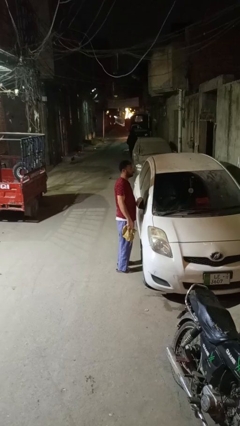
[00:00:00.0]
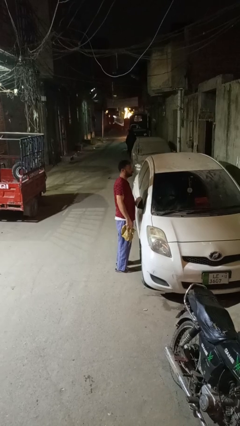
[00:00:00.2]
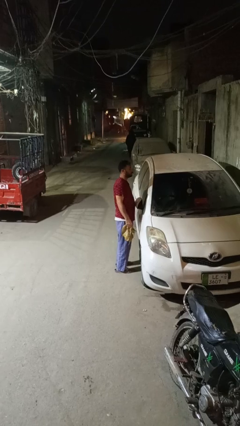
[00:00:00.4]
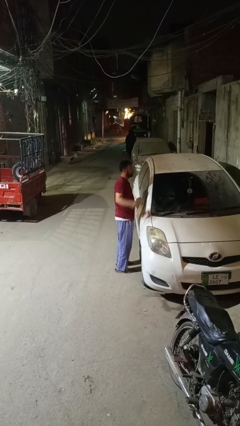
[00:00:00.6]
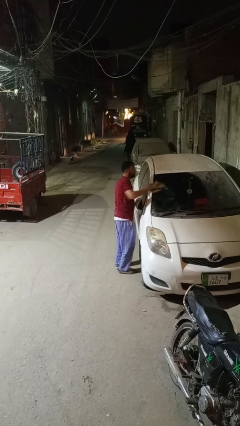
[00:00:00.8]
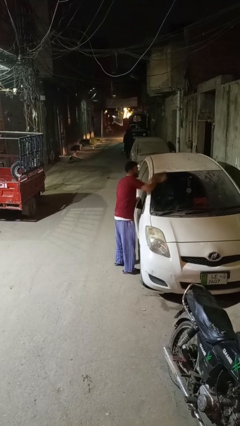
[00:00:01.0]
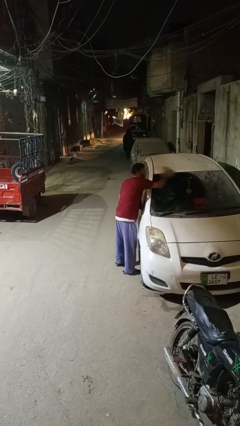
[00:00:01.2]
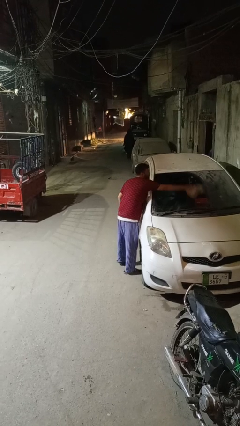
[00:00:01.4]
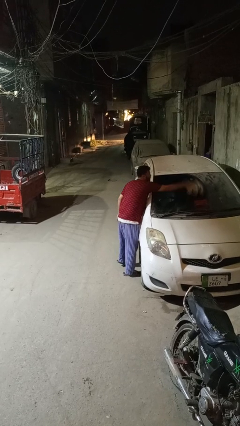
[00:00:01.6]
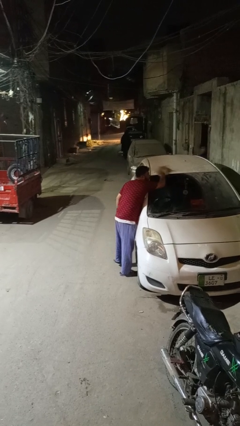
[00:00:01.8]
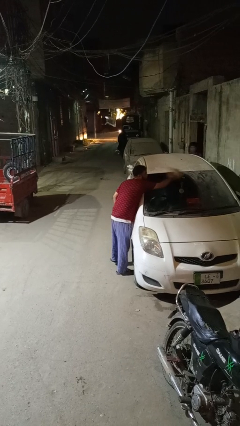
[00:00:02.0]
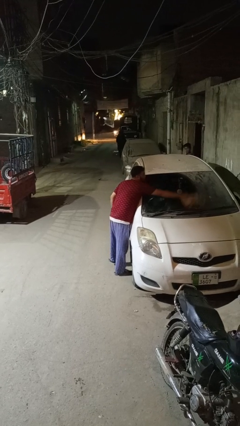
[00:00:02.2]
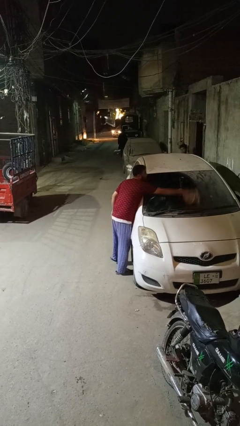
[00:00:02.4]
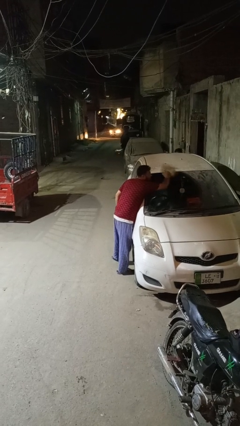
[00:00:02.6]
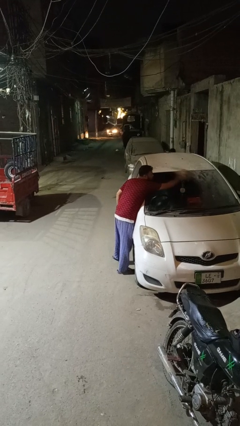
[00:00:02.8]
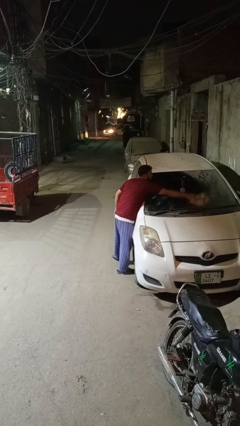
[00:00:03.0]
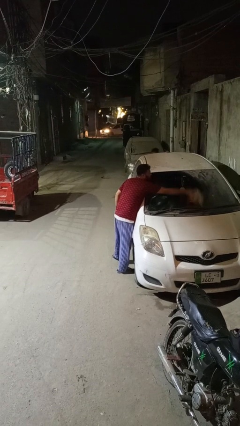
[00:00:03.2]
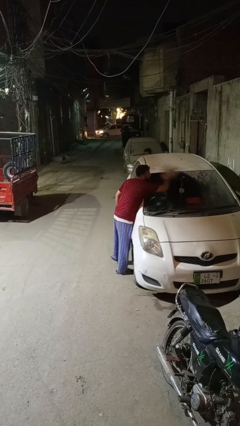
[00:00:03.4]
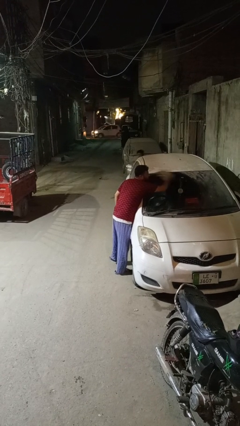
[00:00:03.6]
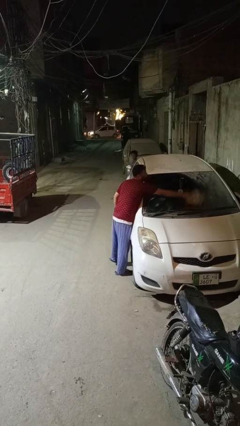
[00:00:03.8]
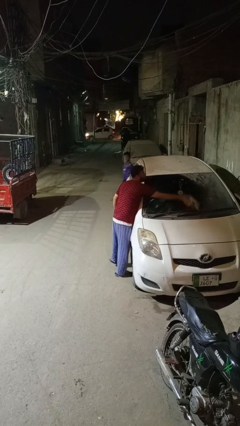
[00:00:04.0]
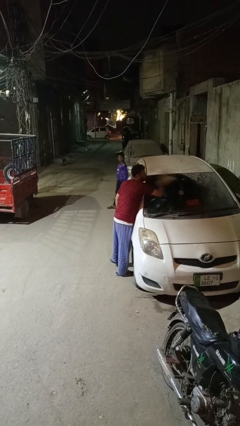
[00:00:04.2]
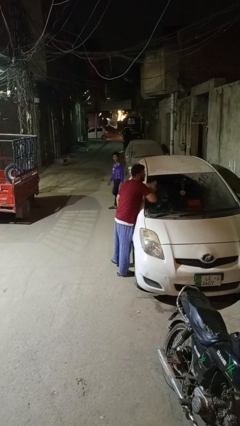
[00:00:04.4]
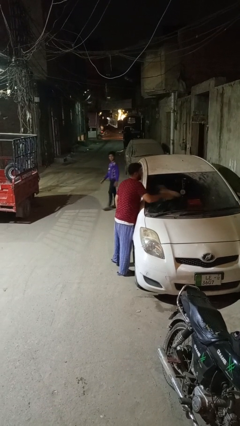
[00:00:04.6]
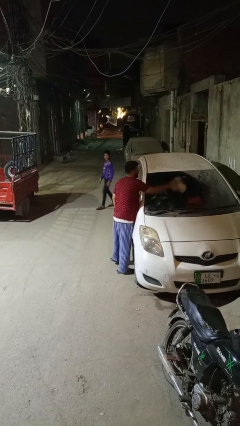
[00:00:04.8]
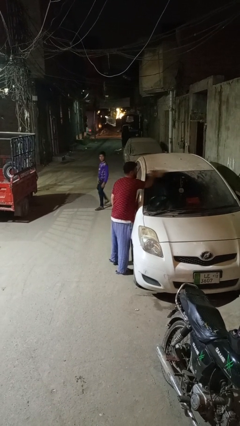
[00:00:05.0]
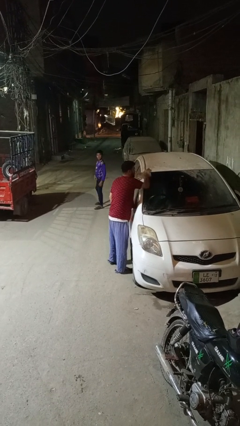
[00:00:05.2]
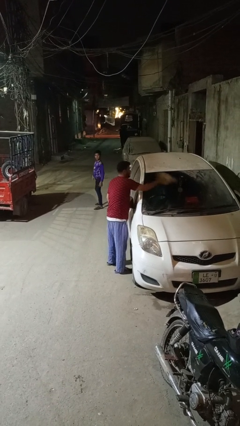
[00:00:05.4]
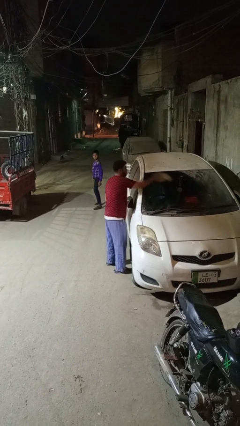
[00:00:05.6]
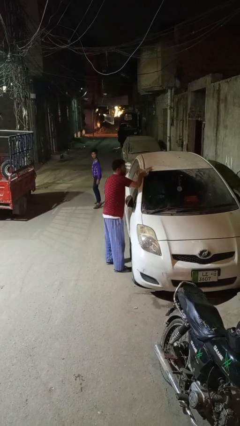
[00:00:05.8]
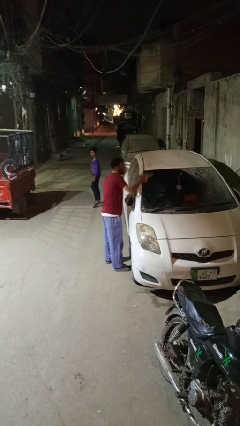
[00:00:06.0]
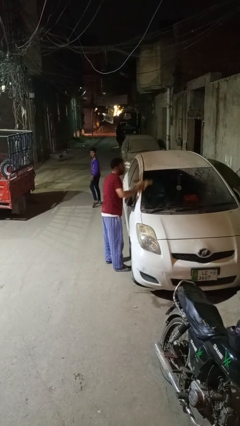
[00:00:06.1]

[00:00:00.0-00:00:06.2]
person polishes car with rag

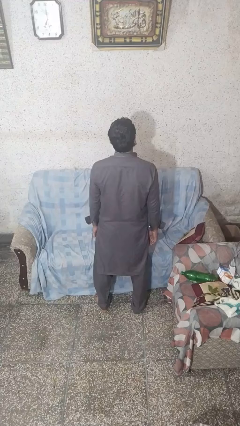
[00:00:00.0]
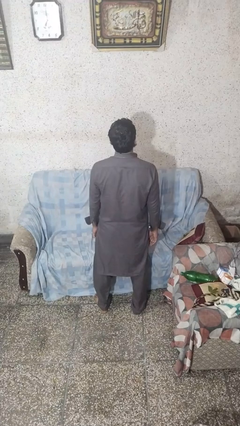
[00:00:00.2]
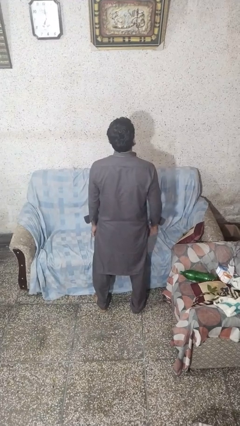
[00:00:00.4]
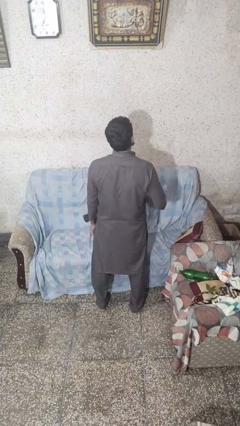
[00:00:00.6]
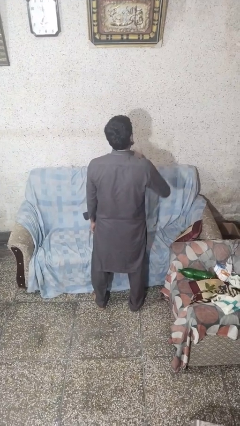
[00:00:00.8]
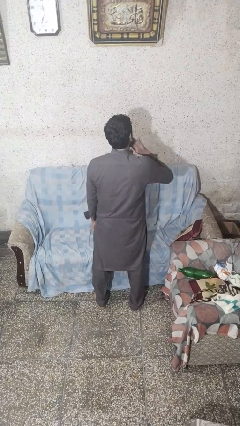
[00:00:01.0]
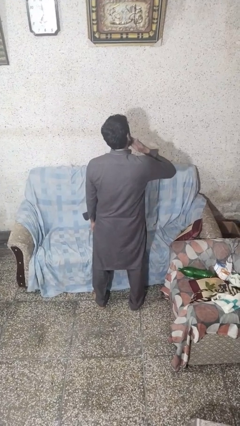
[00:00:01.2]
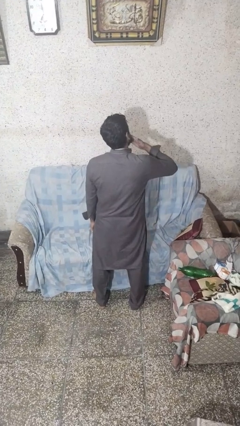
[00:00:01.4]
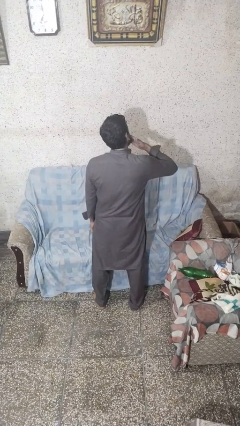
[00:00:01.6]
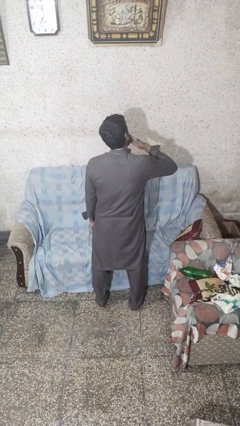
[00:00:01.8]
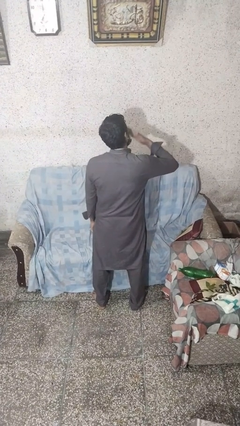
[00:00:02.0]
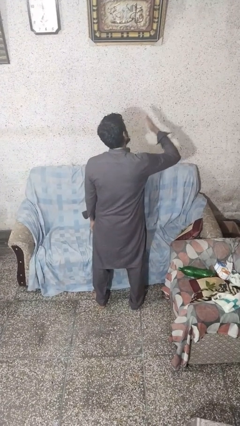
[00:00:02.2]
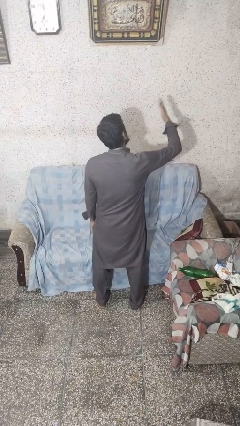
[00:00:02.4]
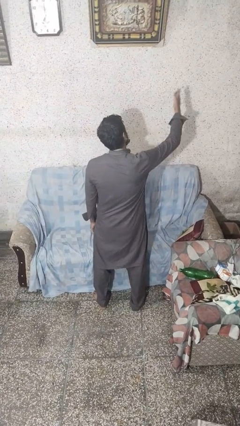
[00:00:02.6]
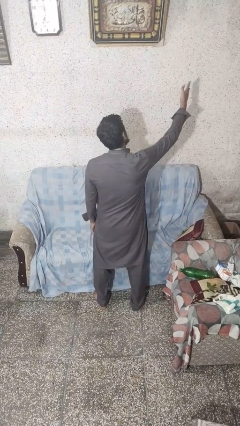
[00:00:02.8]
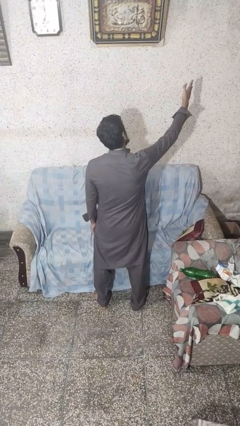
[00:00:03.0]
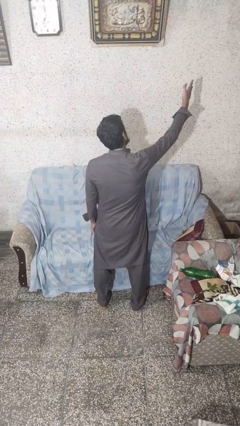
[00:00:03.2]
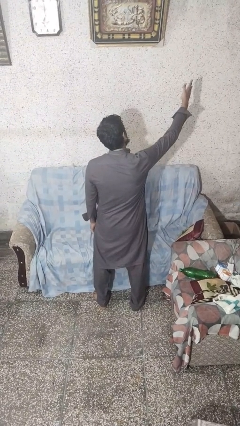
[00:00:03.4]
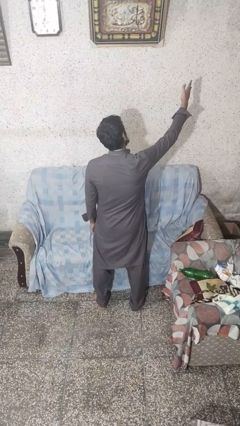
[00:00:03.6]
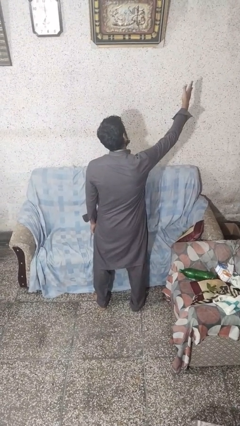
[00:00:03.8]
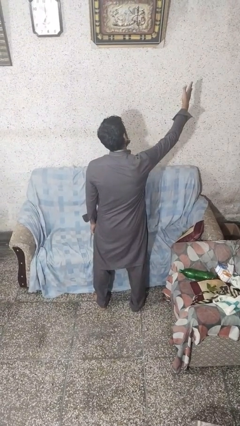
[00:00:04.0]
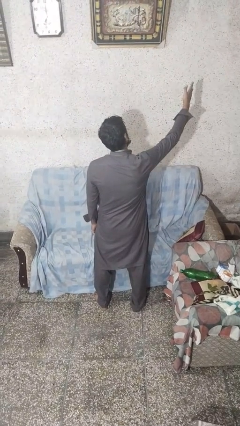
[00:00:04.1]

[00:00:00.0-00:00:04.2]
person gestures blow kiss

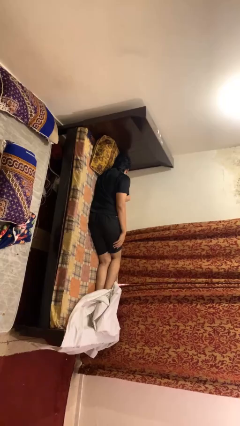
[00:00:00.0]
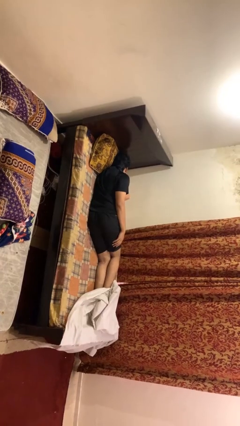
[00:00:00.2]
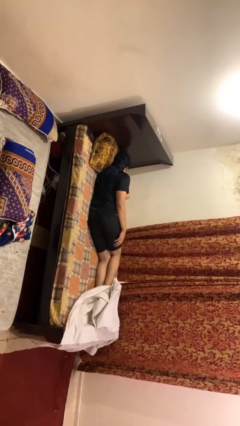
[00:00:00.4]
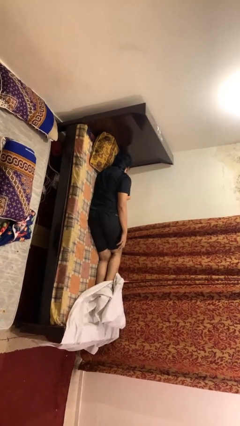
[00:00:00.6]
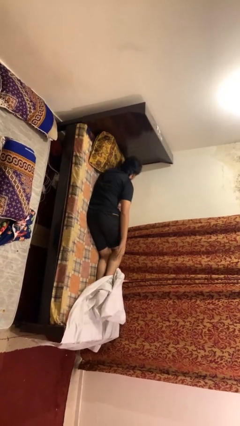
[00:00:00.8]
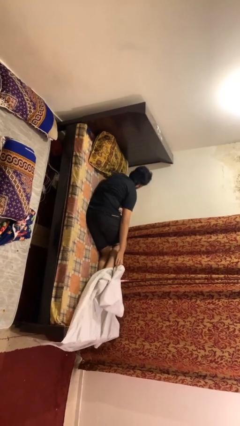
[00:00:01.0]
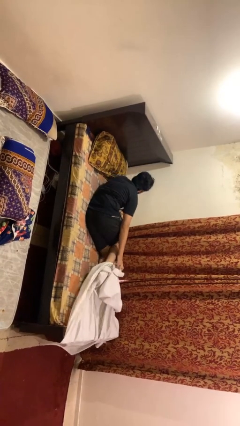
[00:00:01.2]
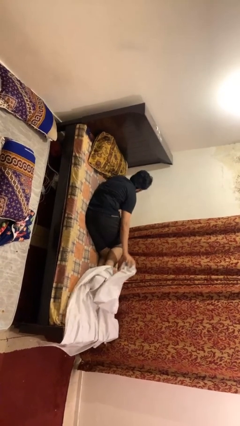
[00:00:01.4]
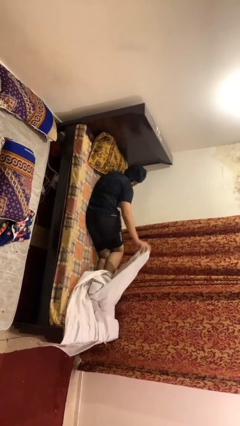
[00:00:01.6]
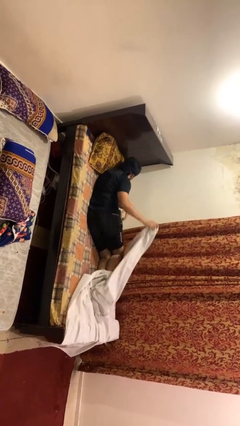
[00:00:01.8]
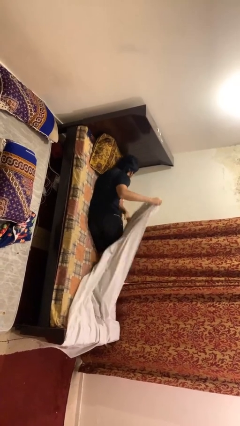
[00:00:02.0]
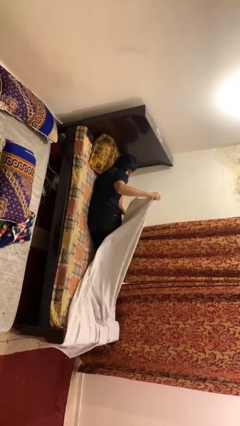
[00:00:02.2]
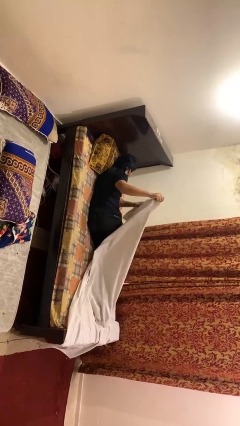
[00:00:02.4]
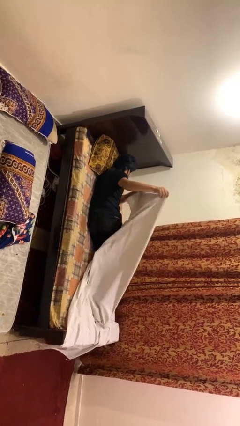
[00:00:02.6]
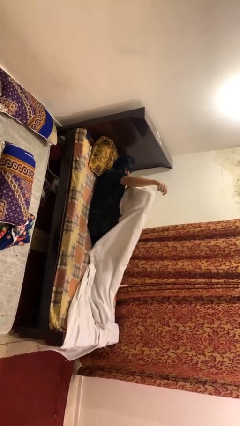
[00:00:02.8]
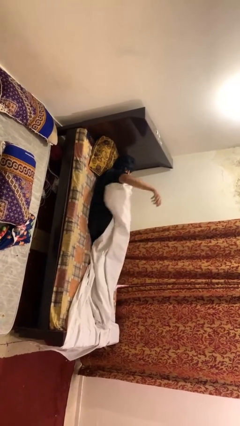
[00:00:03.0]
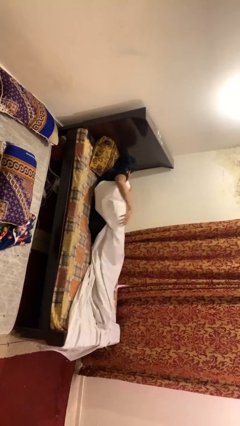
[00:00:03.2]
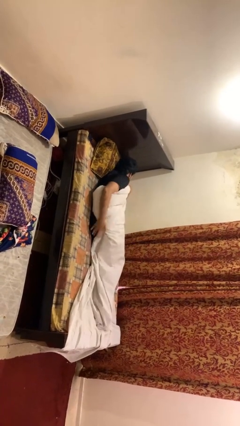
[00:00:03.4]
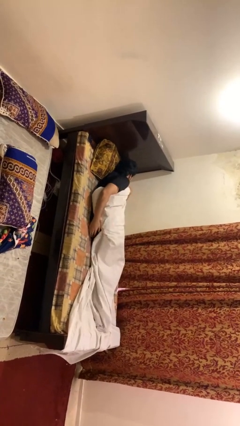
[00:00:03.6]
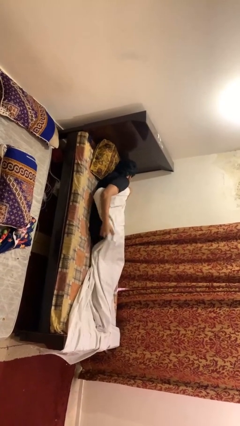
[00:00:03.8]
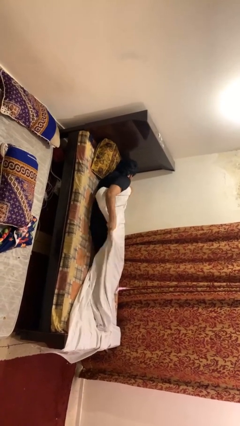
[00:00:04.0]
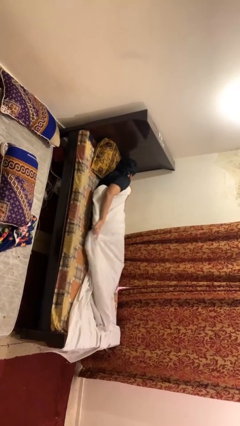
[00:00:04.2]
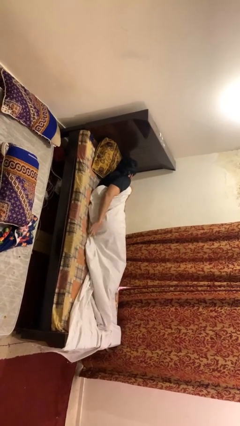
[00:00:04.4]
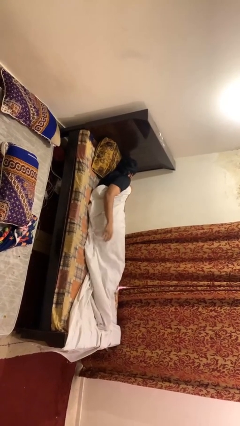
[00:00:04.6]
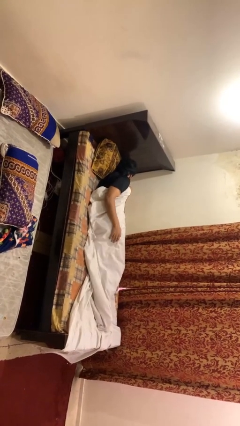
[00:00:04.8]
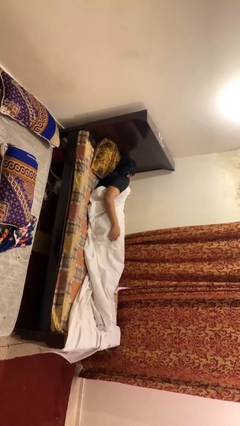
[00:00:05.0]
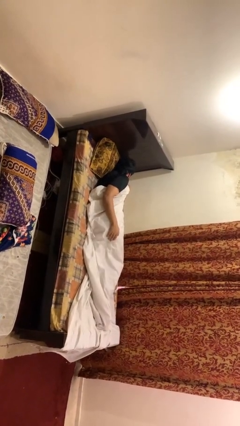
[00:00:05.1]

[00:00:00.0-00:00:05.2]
person covers with bedsheets

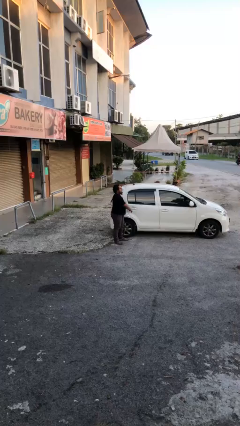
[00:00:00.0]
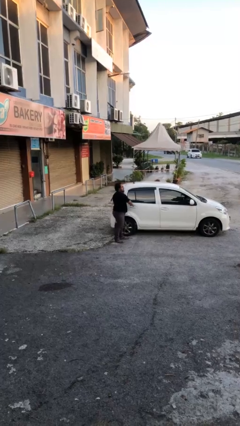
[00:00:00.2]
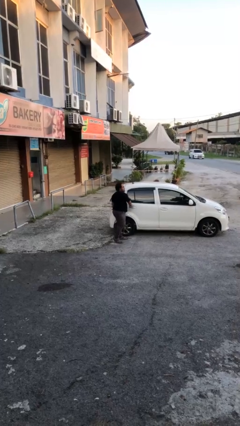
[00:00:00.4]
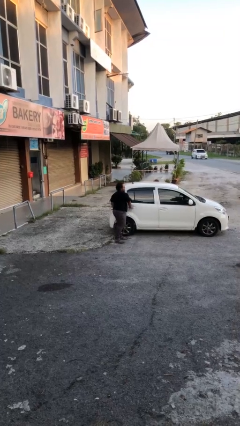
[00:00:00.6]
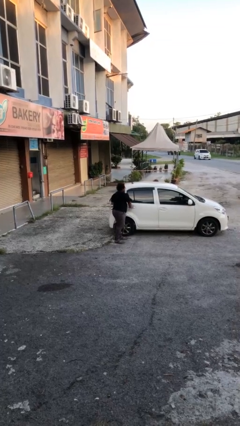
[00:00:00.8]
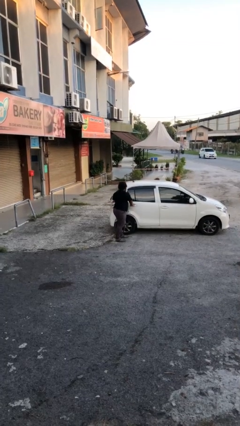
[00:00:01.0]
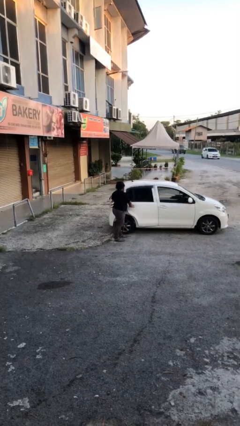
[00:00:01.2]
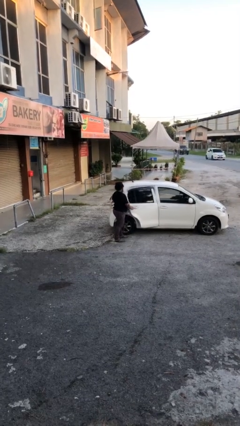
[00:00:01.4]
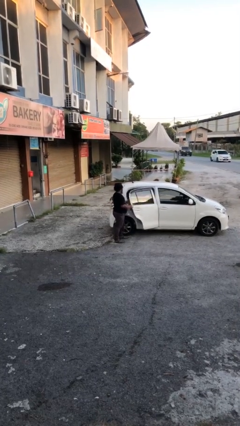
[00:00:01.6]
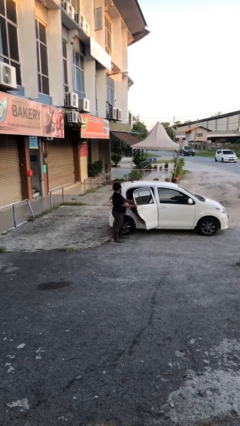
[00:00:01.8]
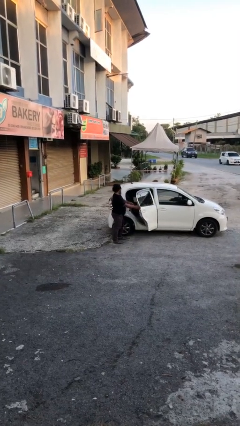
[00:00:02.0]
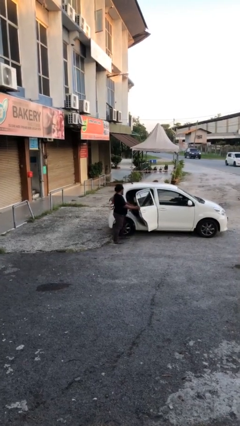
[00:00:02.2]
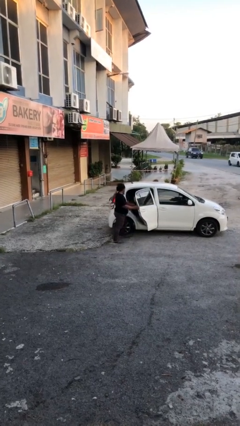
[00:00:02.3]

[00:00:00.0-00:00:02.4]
person opens car door
